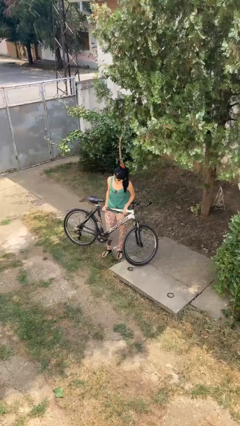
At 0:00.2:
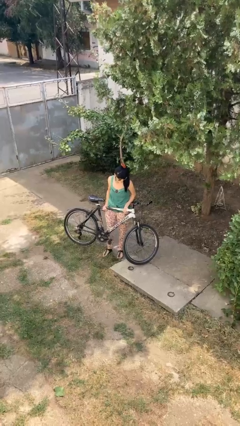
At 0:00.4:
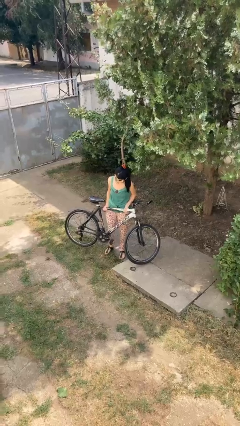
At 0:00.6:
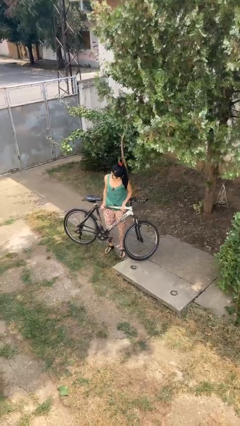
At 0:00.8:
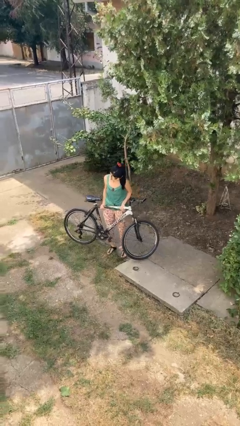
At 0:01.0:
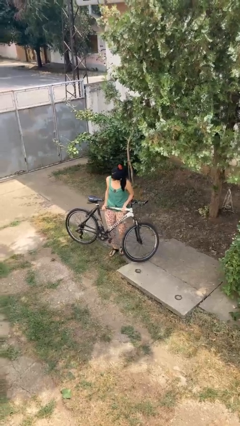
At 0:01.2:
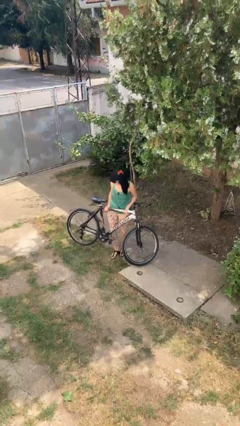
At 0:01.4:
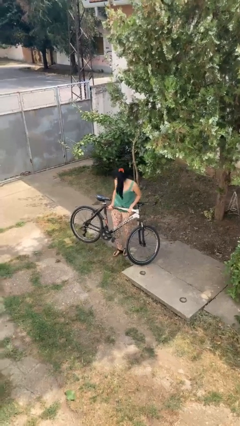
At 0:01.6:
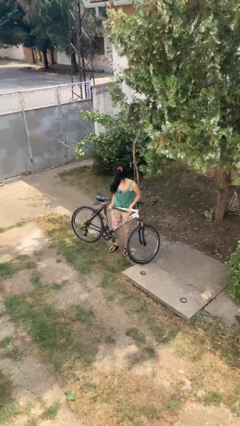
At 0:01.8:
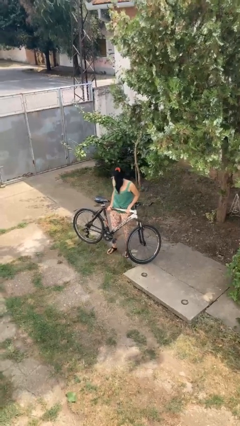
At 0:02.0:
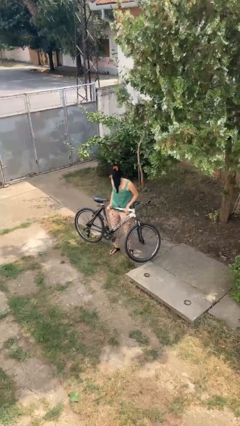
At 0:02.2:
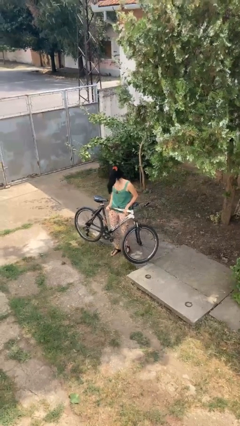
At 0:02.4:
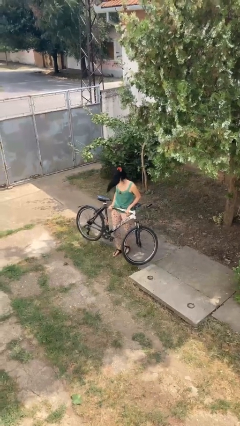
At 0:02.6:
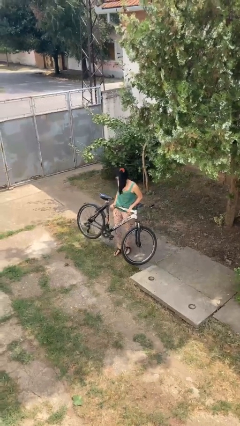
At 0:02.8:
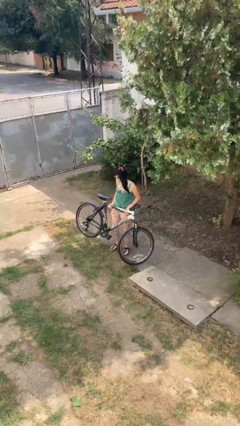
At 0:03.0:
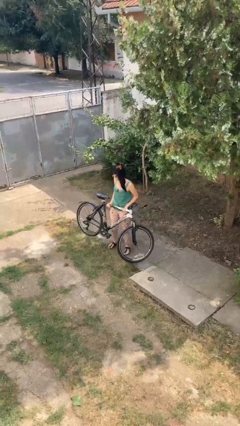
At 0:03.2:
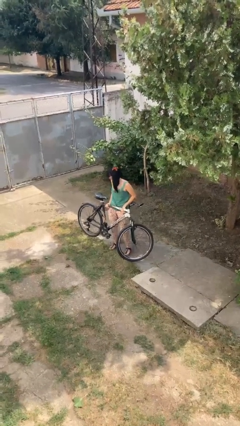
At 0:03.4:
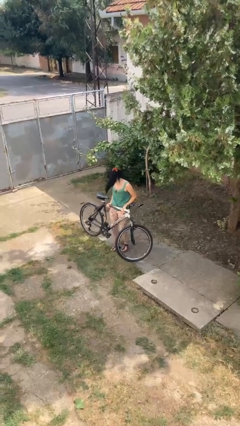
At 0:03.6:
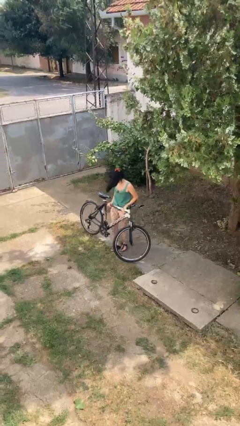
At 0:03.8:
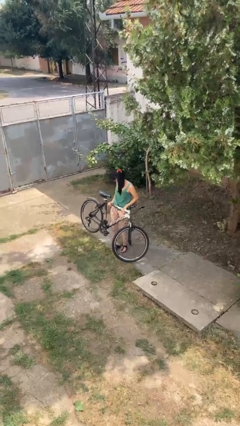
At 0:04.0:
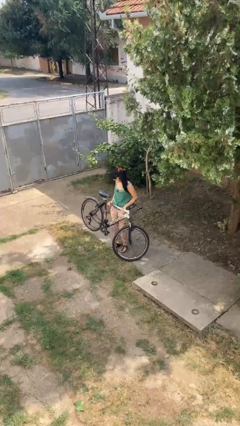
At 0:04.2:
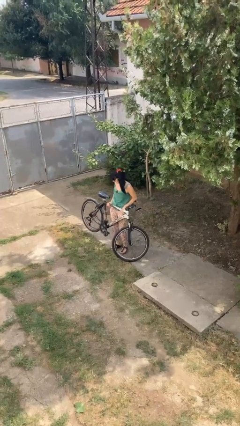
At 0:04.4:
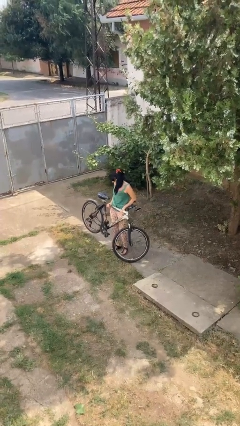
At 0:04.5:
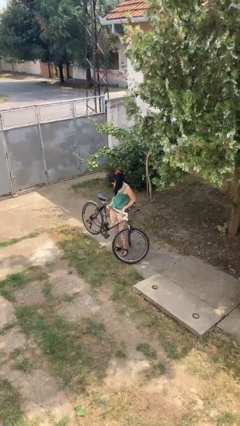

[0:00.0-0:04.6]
person carries bicycle

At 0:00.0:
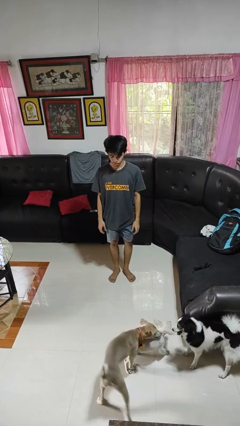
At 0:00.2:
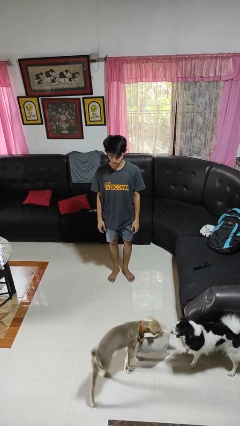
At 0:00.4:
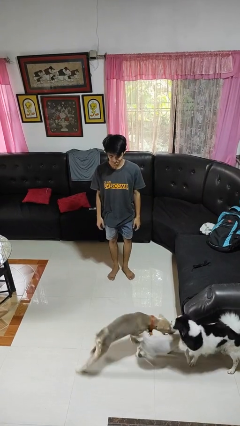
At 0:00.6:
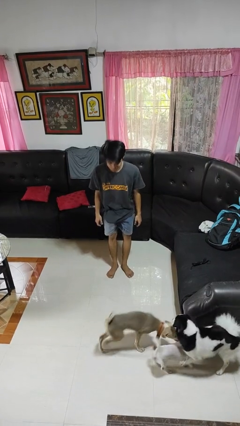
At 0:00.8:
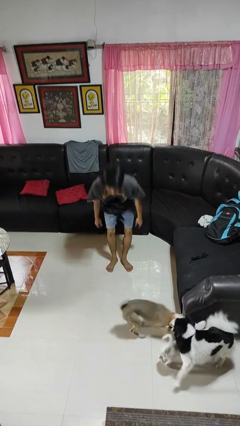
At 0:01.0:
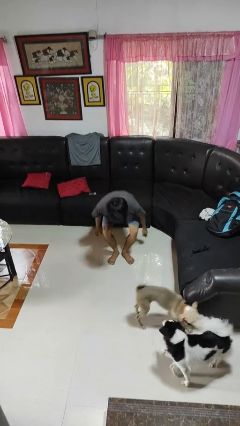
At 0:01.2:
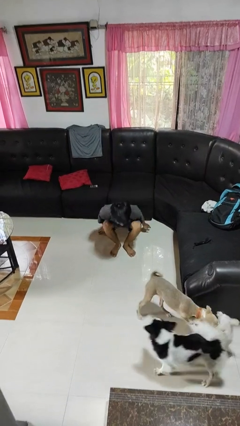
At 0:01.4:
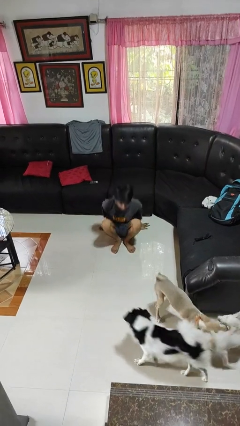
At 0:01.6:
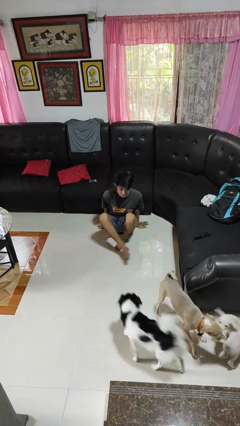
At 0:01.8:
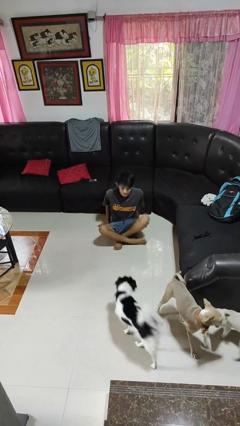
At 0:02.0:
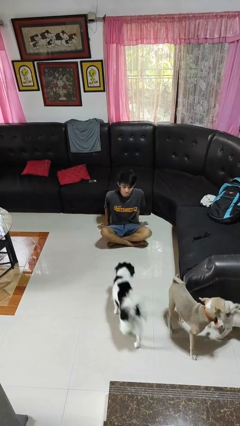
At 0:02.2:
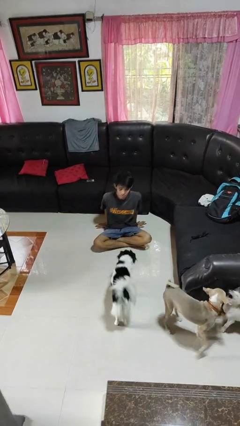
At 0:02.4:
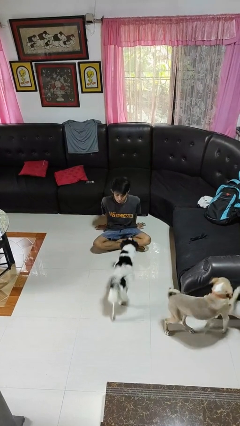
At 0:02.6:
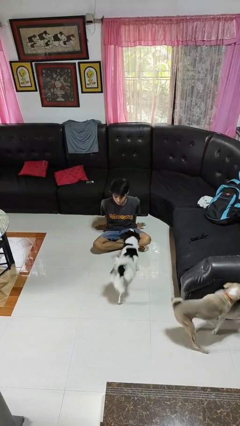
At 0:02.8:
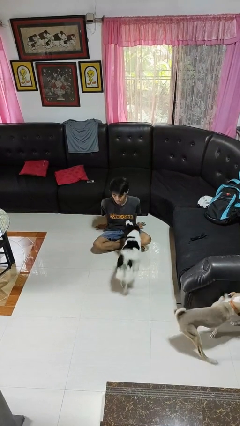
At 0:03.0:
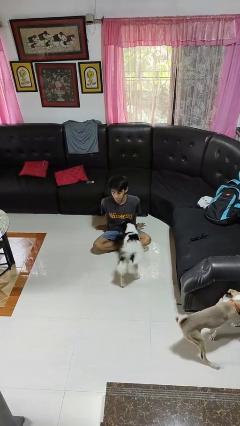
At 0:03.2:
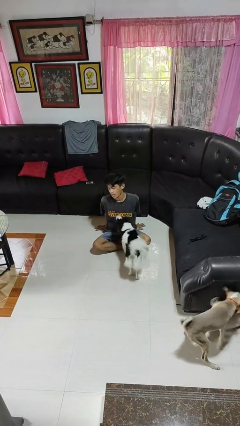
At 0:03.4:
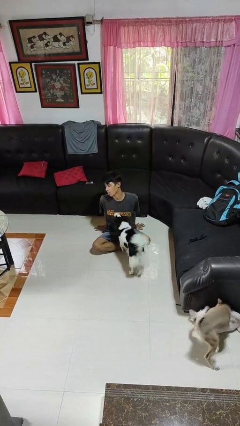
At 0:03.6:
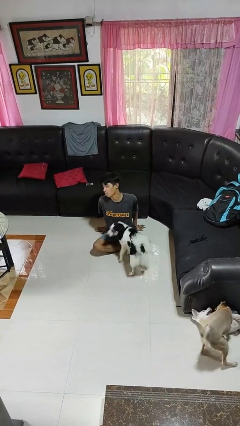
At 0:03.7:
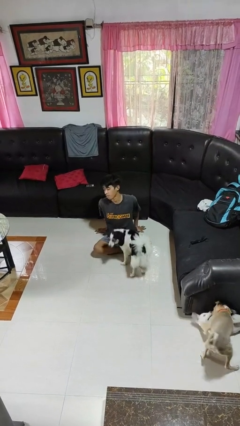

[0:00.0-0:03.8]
person sits crisscross

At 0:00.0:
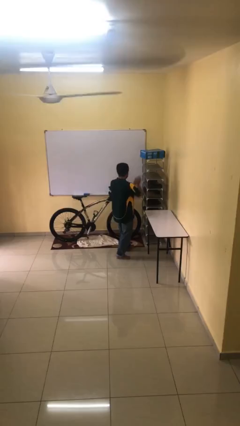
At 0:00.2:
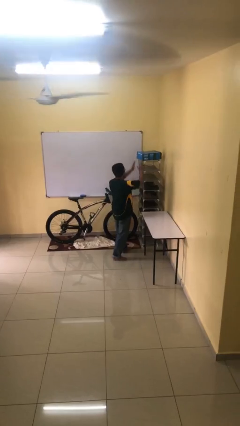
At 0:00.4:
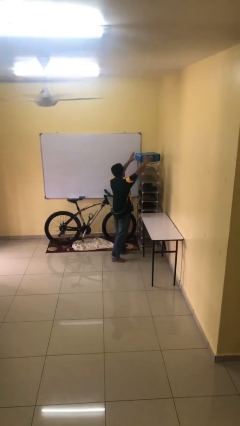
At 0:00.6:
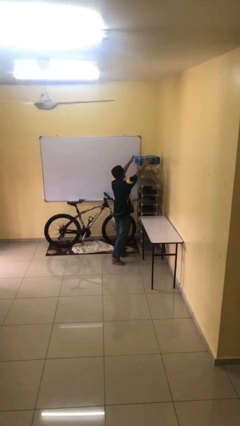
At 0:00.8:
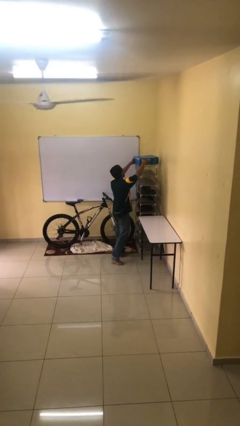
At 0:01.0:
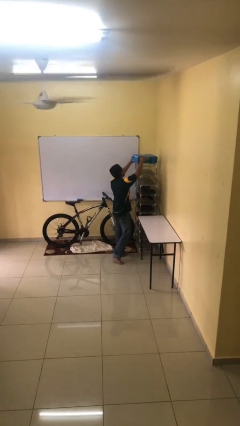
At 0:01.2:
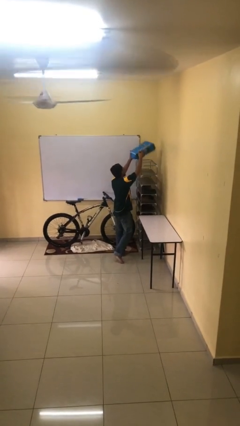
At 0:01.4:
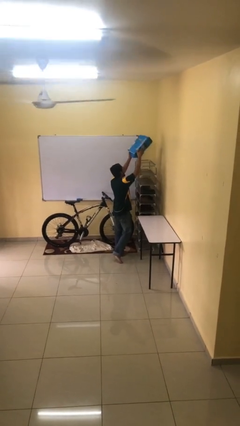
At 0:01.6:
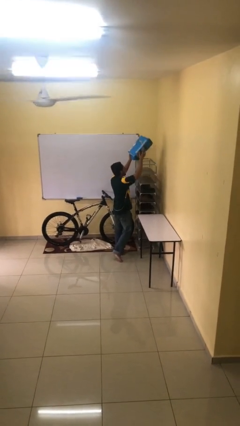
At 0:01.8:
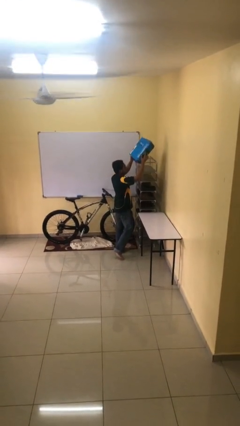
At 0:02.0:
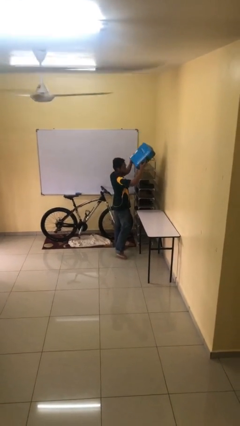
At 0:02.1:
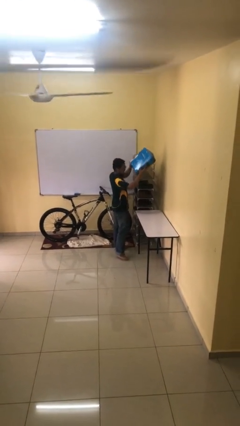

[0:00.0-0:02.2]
person picks up object from shelf

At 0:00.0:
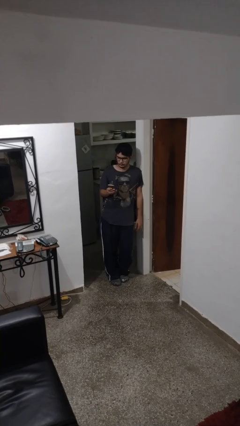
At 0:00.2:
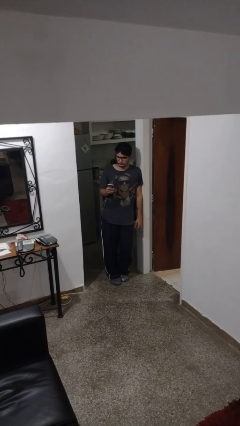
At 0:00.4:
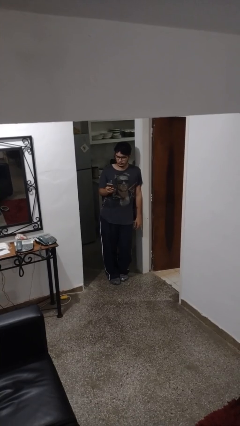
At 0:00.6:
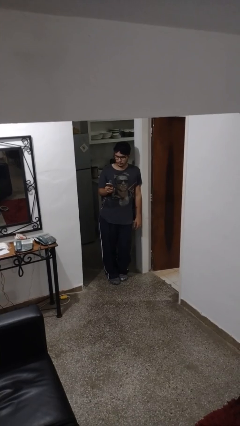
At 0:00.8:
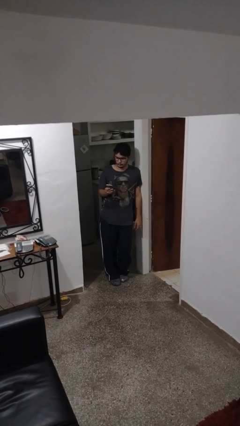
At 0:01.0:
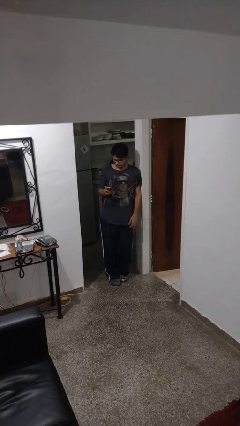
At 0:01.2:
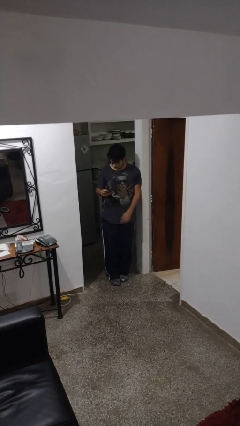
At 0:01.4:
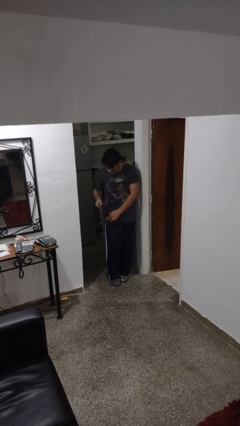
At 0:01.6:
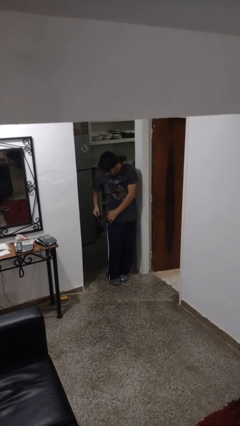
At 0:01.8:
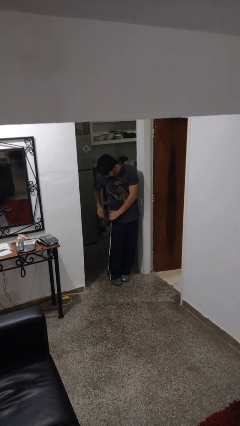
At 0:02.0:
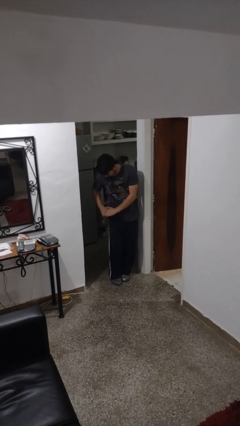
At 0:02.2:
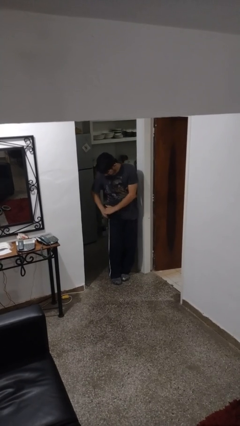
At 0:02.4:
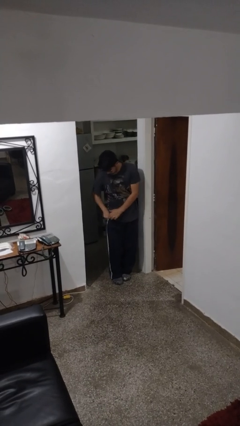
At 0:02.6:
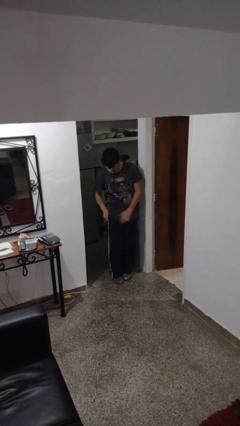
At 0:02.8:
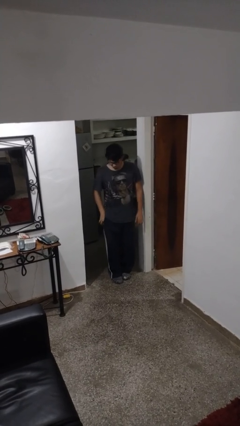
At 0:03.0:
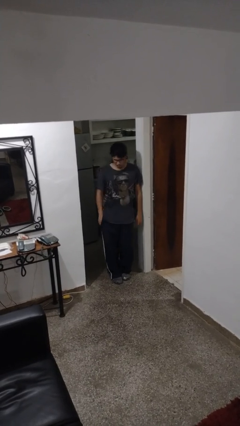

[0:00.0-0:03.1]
person puts phone into pocket

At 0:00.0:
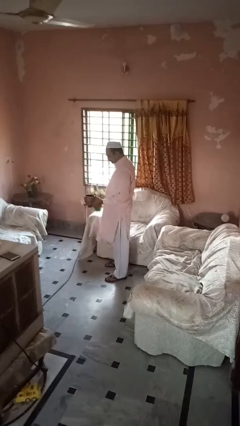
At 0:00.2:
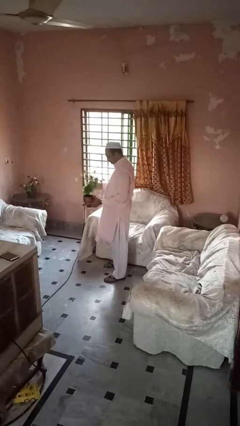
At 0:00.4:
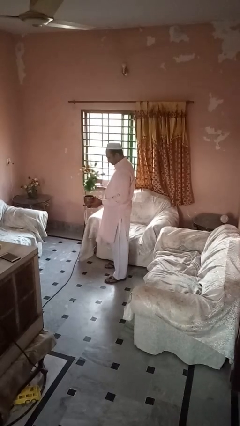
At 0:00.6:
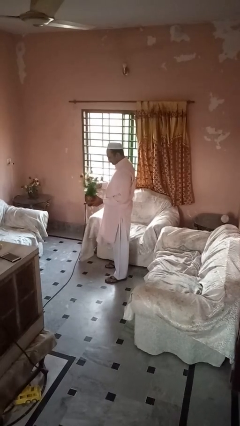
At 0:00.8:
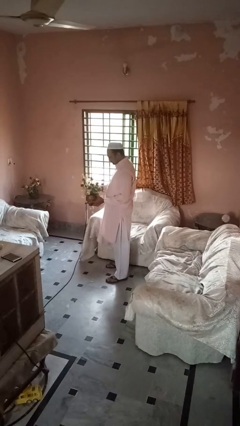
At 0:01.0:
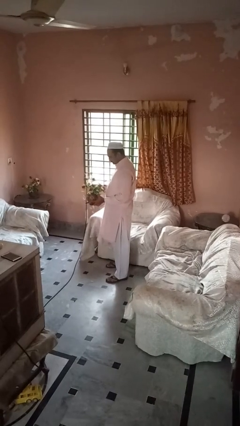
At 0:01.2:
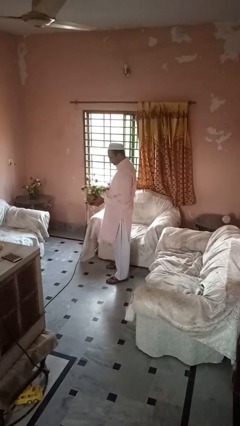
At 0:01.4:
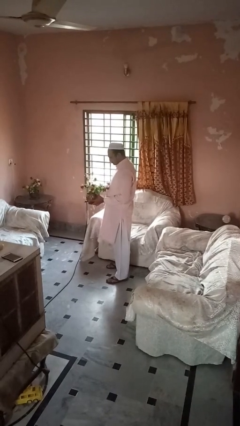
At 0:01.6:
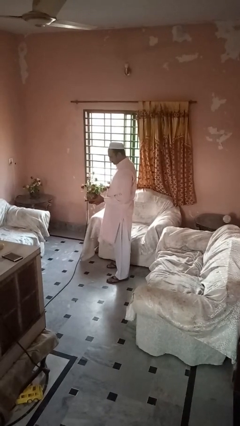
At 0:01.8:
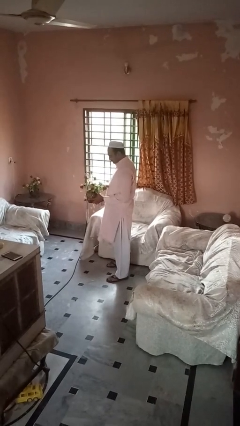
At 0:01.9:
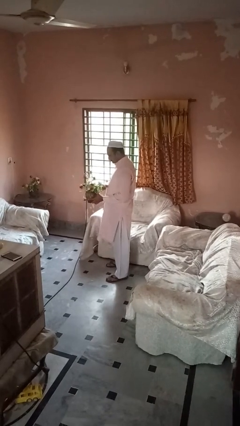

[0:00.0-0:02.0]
person arranges flowers in vase

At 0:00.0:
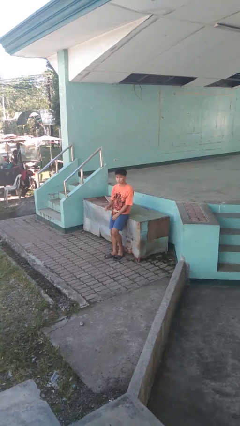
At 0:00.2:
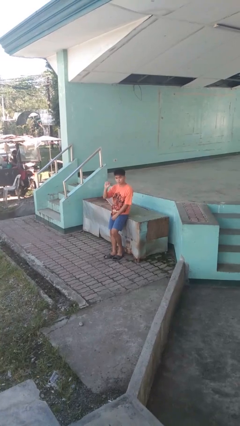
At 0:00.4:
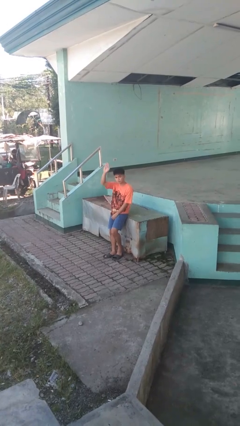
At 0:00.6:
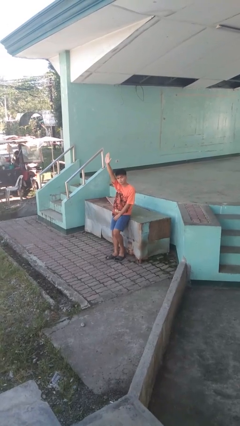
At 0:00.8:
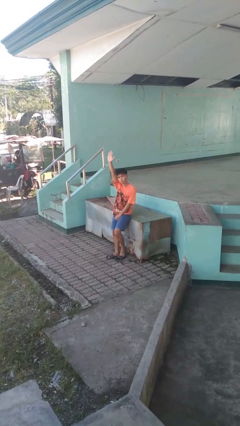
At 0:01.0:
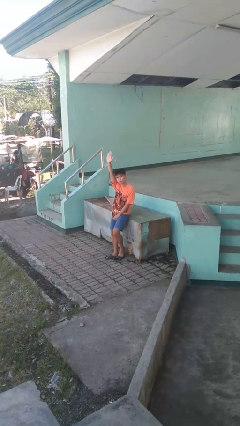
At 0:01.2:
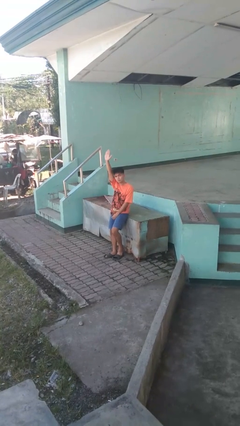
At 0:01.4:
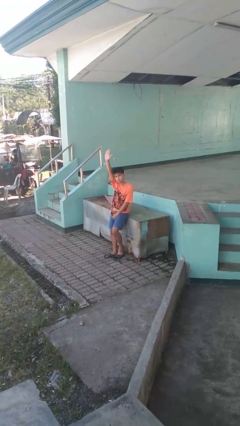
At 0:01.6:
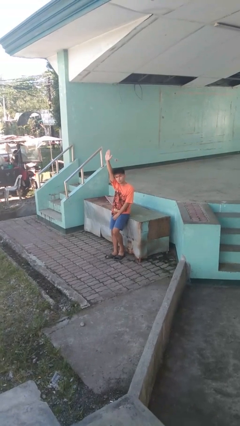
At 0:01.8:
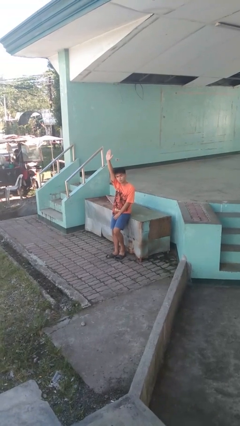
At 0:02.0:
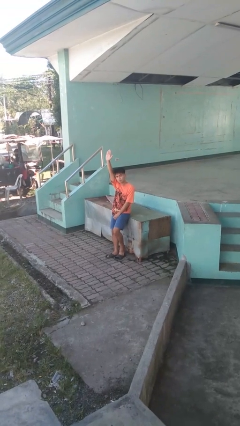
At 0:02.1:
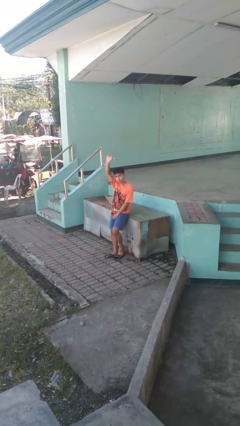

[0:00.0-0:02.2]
person gestures raise hand
